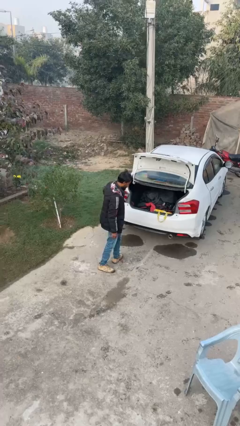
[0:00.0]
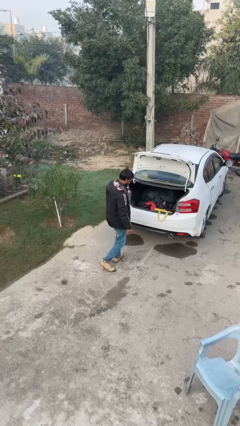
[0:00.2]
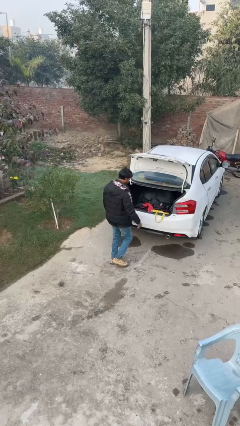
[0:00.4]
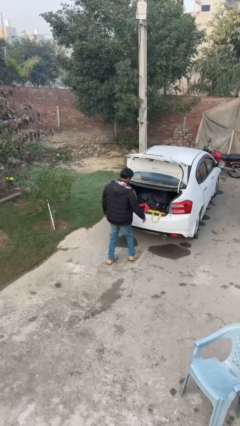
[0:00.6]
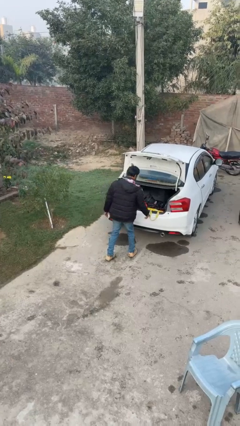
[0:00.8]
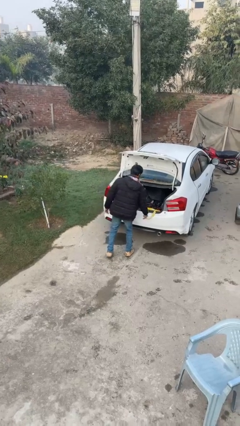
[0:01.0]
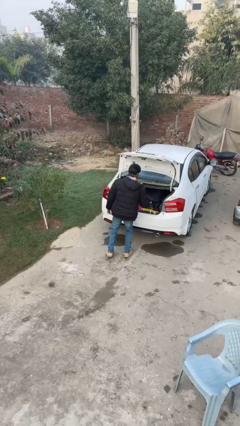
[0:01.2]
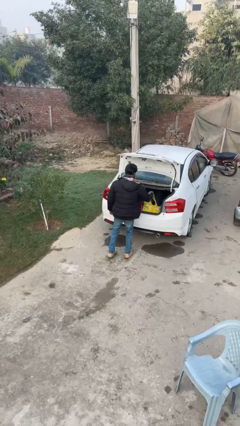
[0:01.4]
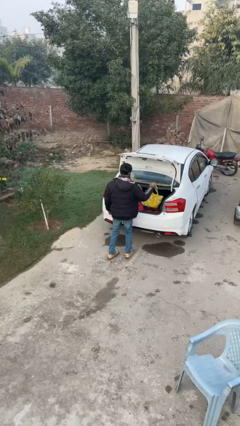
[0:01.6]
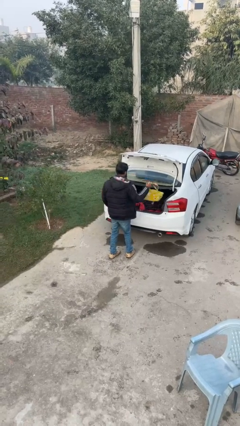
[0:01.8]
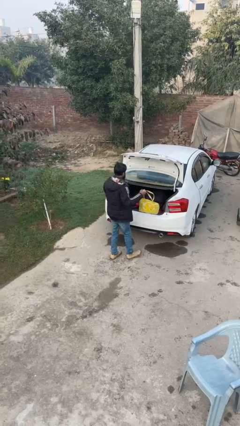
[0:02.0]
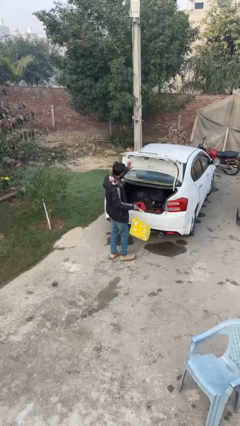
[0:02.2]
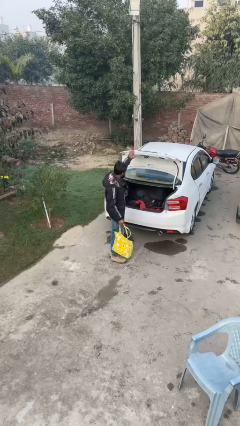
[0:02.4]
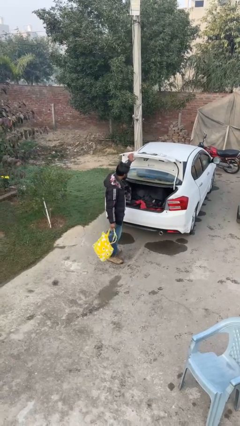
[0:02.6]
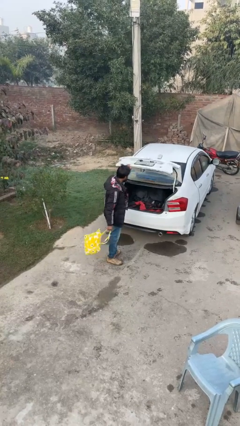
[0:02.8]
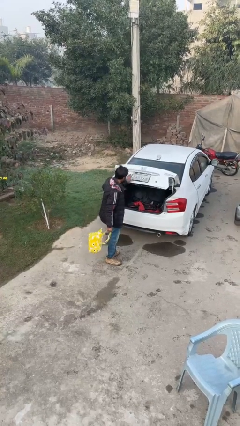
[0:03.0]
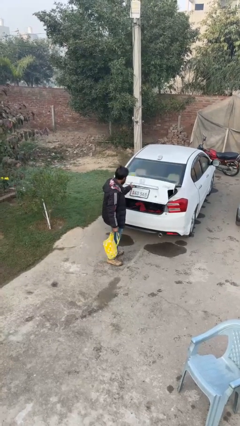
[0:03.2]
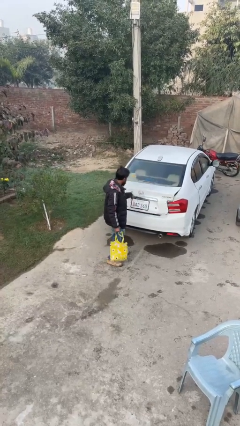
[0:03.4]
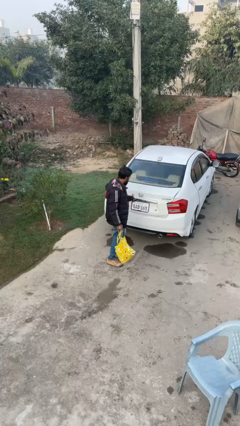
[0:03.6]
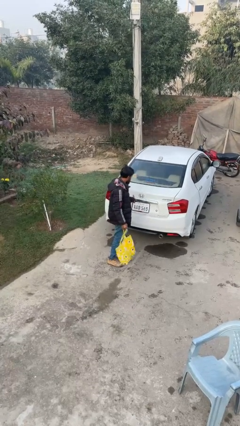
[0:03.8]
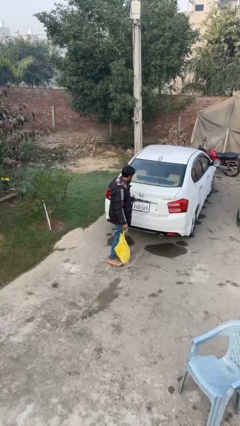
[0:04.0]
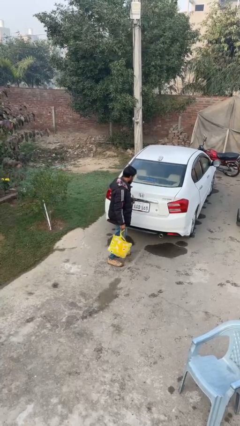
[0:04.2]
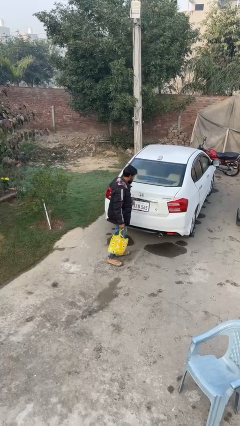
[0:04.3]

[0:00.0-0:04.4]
person unloads car

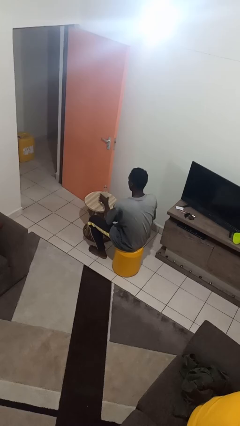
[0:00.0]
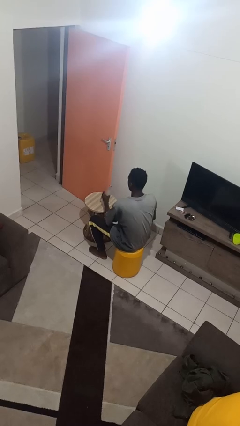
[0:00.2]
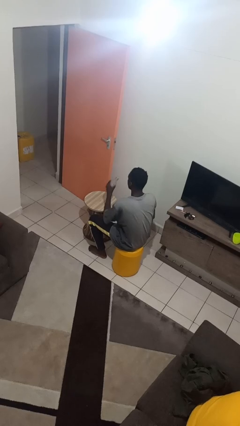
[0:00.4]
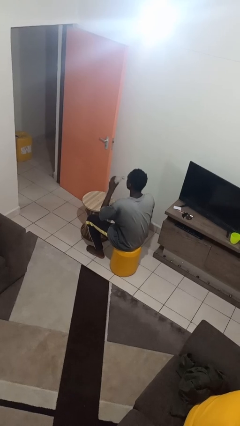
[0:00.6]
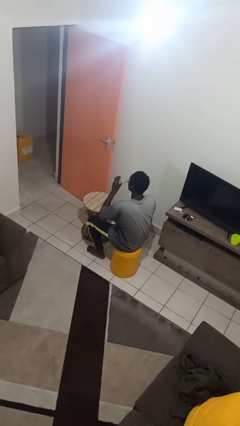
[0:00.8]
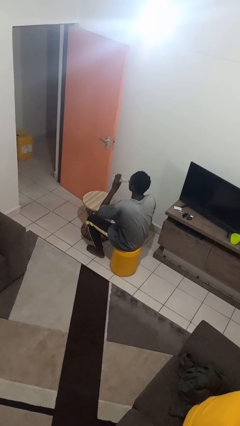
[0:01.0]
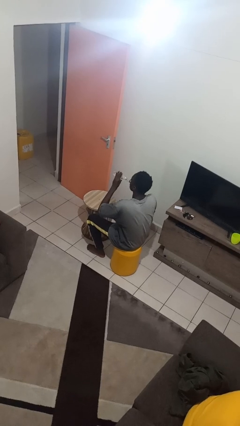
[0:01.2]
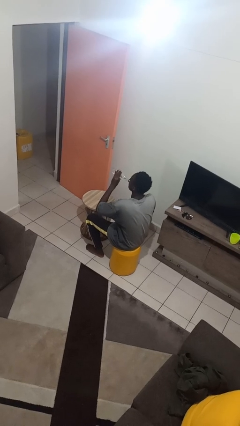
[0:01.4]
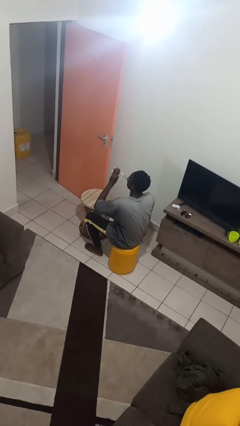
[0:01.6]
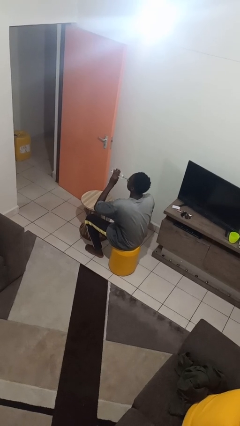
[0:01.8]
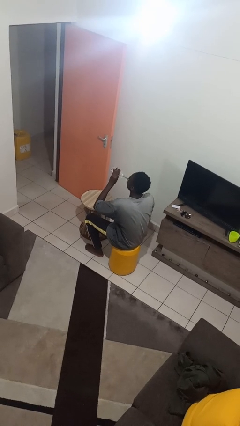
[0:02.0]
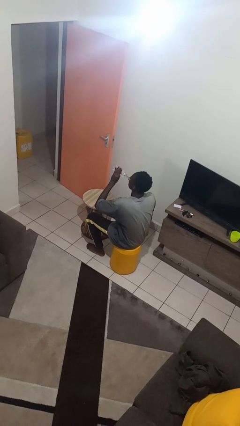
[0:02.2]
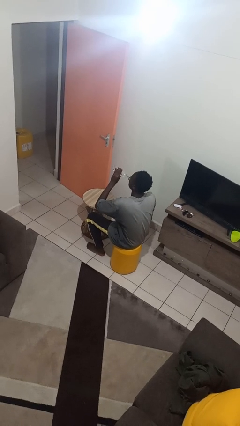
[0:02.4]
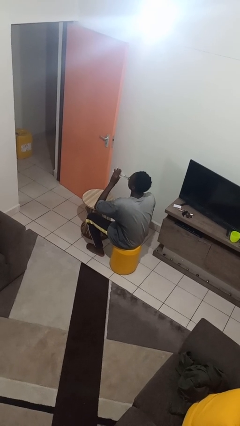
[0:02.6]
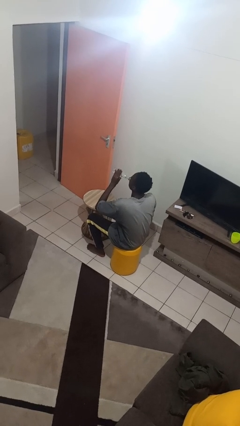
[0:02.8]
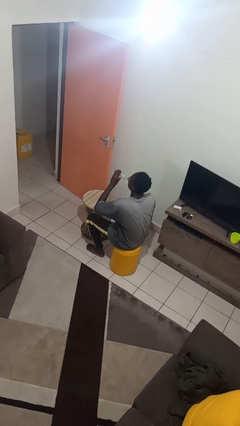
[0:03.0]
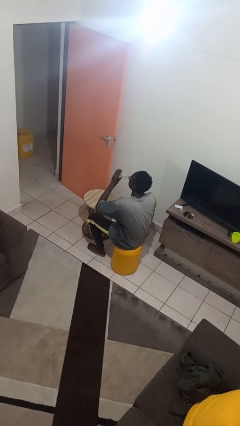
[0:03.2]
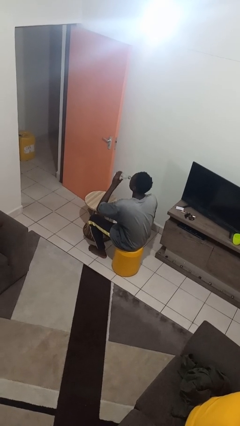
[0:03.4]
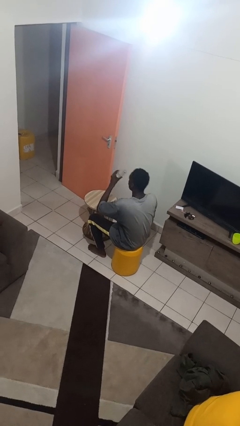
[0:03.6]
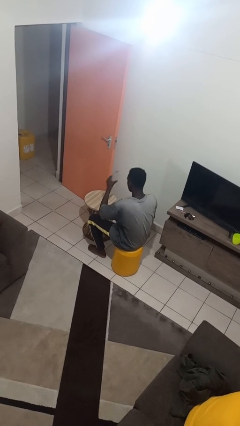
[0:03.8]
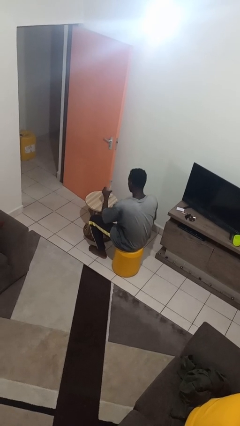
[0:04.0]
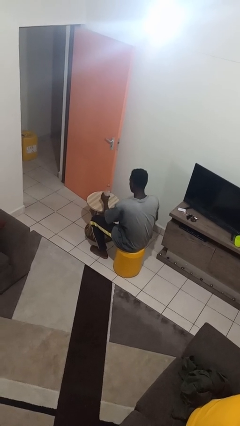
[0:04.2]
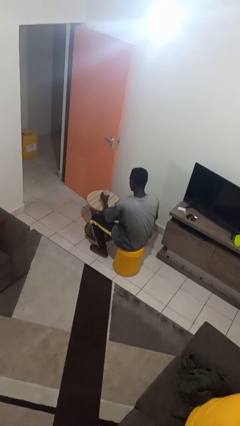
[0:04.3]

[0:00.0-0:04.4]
person drinks from bottle

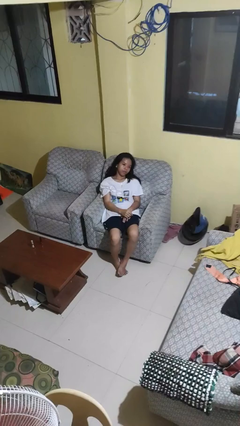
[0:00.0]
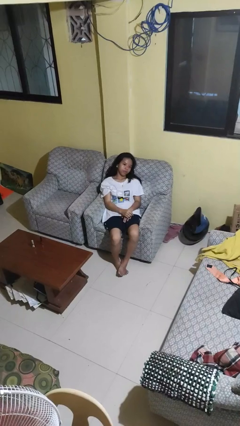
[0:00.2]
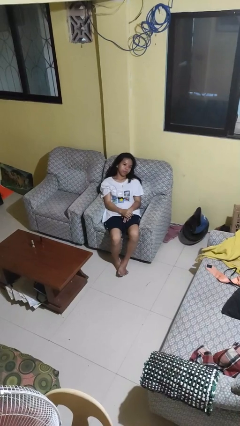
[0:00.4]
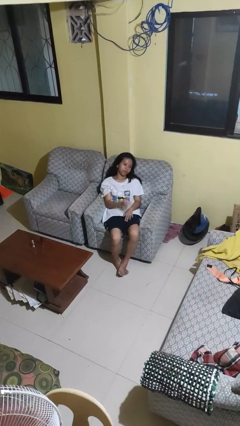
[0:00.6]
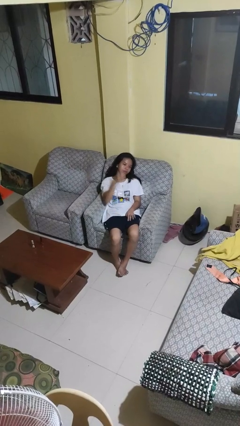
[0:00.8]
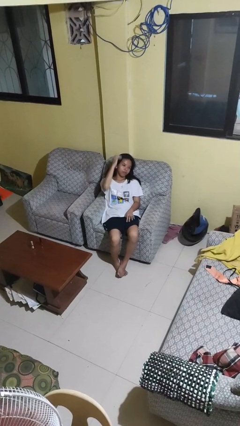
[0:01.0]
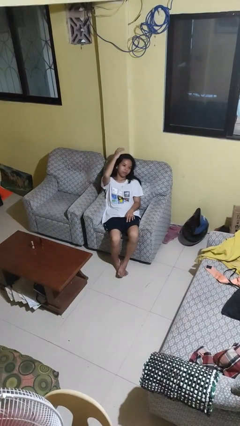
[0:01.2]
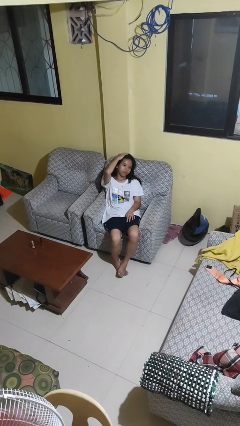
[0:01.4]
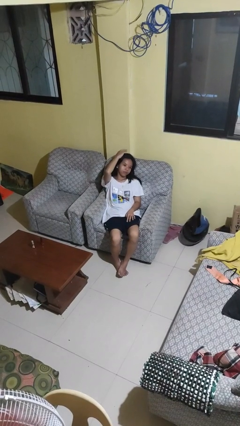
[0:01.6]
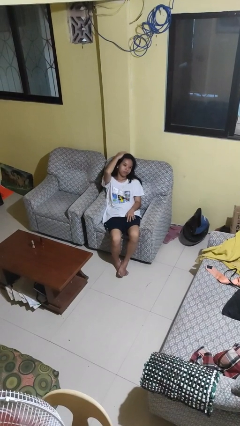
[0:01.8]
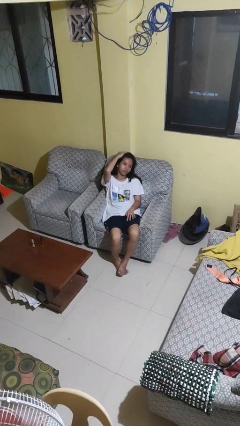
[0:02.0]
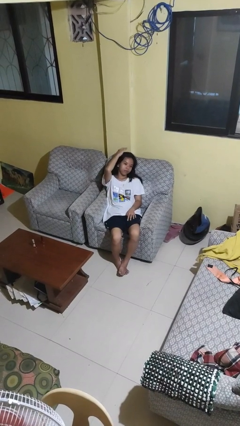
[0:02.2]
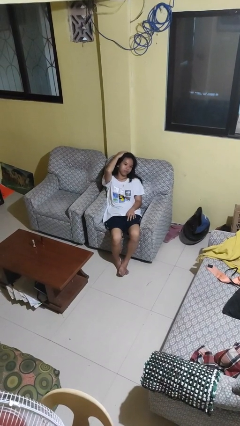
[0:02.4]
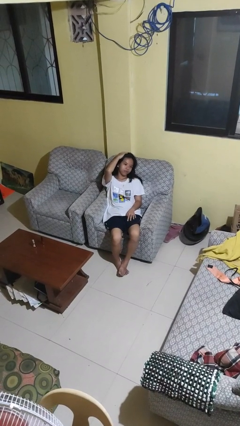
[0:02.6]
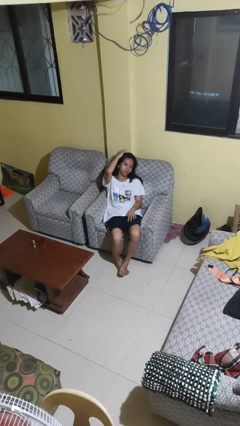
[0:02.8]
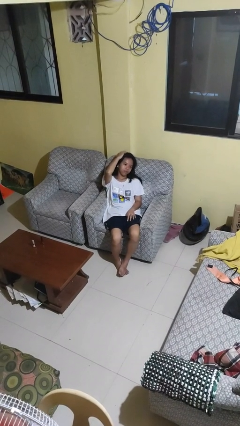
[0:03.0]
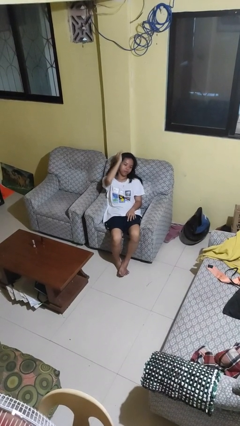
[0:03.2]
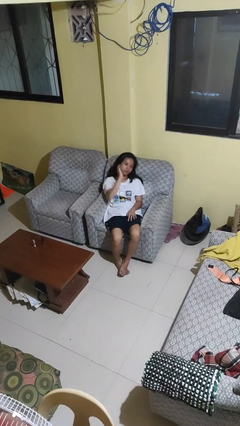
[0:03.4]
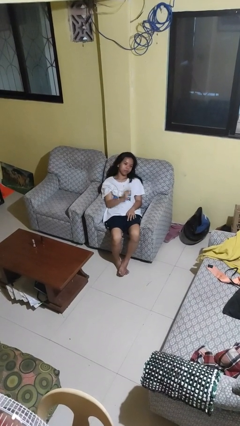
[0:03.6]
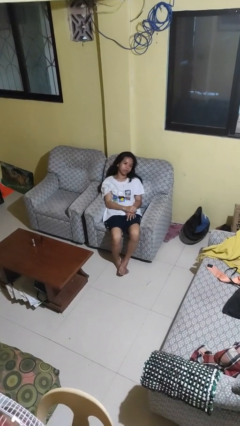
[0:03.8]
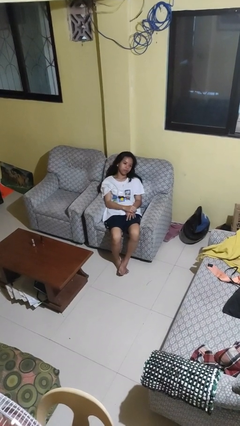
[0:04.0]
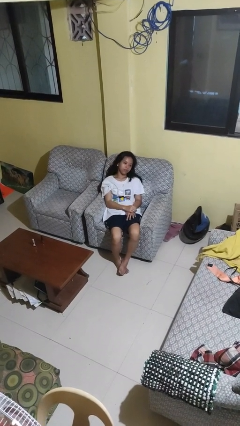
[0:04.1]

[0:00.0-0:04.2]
person pats head

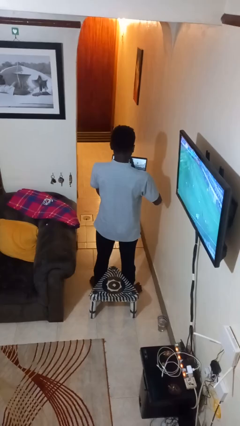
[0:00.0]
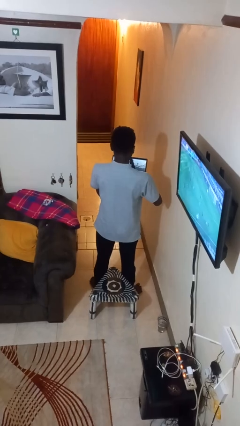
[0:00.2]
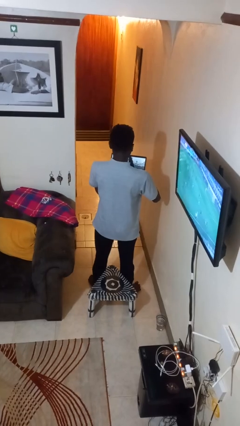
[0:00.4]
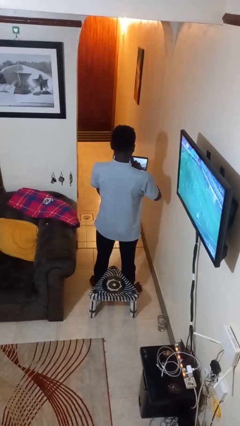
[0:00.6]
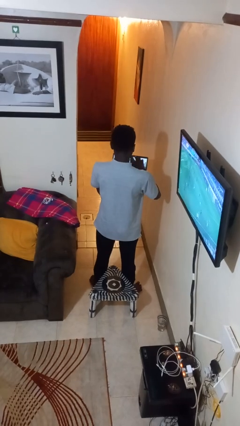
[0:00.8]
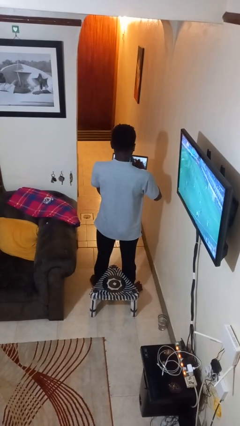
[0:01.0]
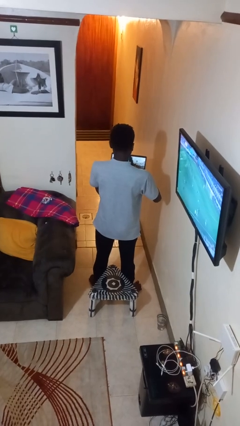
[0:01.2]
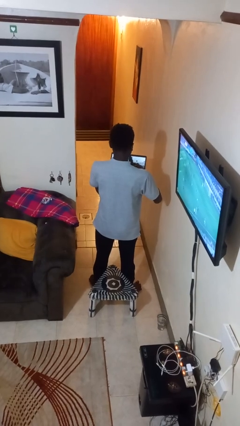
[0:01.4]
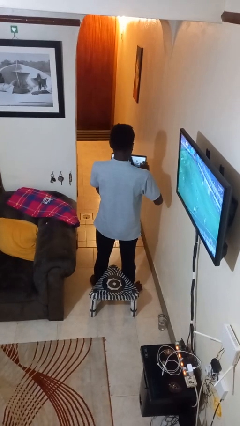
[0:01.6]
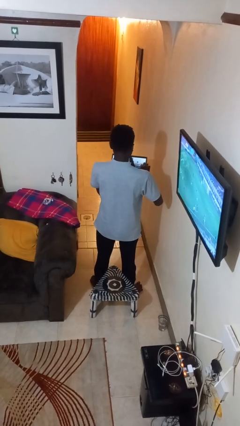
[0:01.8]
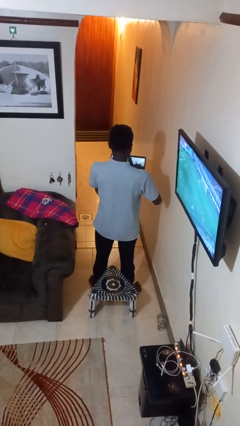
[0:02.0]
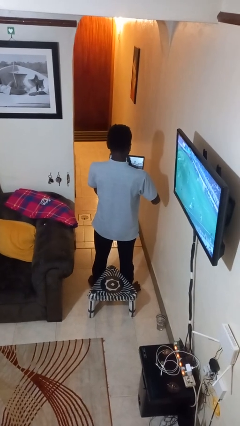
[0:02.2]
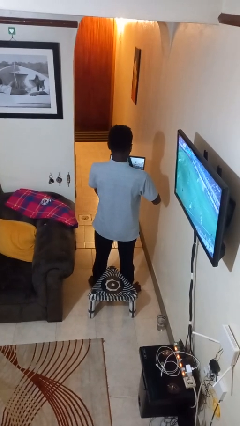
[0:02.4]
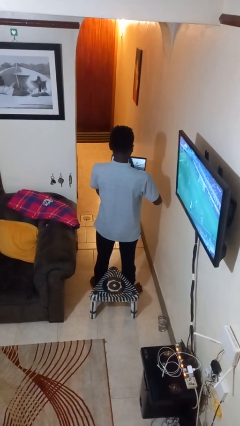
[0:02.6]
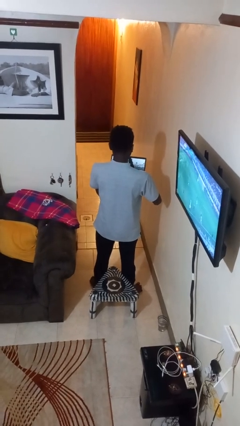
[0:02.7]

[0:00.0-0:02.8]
person interacts with tablet

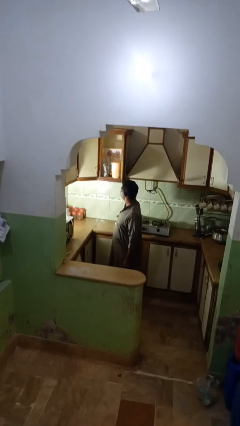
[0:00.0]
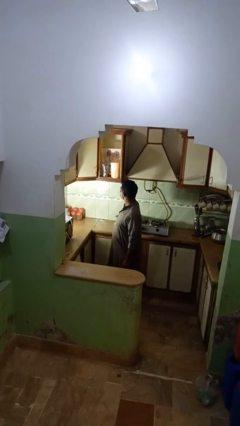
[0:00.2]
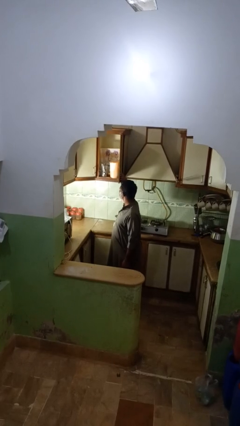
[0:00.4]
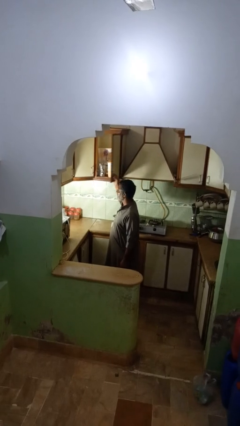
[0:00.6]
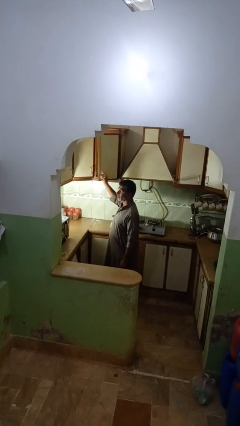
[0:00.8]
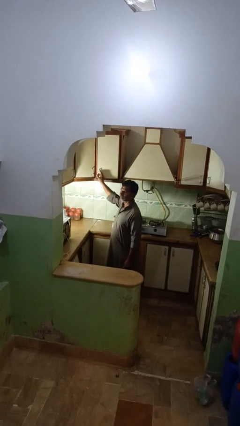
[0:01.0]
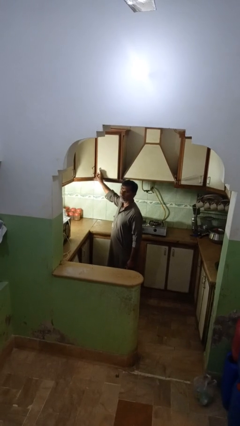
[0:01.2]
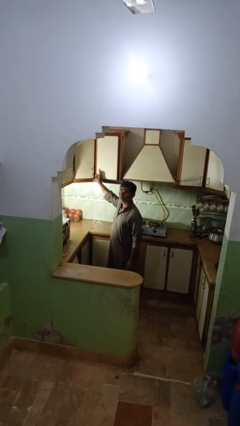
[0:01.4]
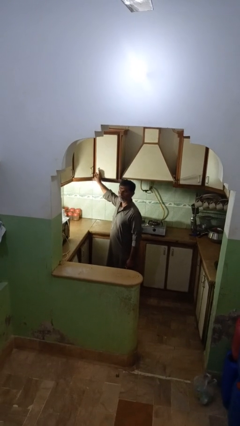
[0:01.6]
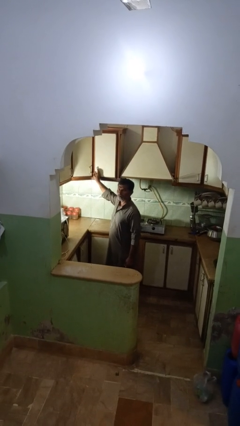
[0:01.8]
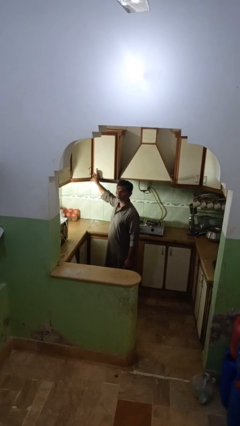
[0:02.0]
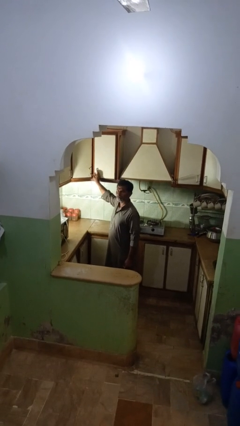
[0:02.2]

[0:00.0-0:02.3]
person closes kitchen drawer
